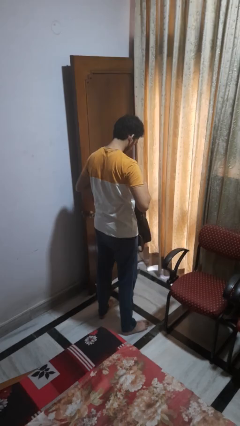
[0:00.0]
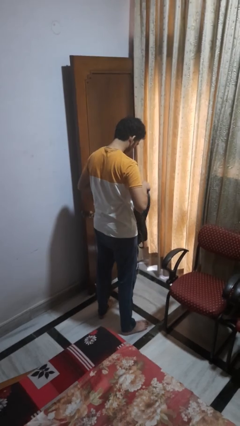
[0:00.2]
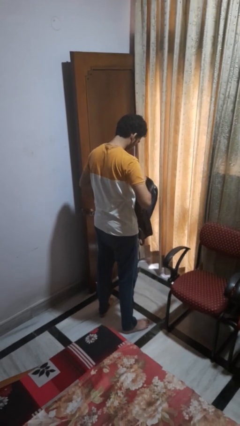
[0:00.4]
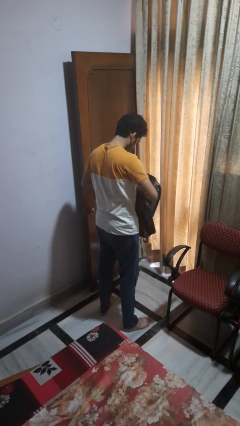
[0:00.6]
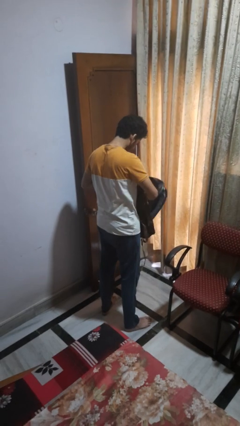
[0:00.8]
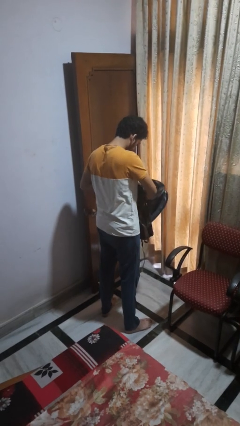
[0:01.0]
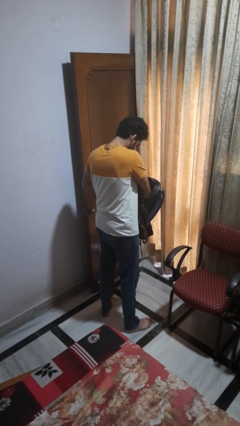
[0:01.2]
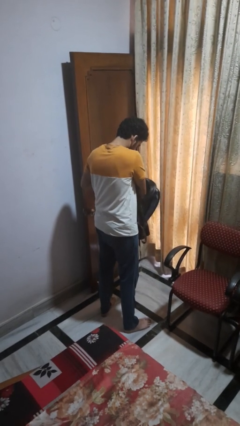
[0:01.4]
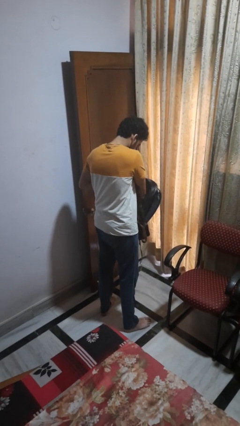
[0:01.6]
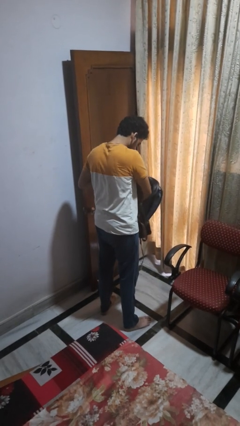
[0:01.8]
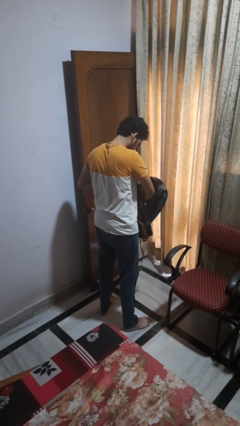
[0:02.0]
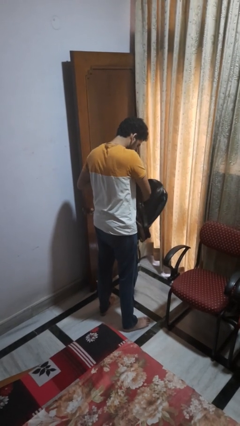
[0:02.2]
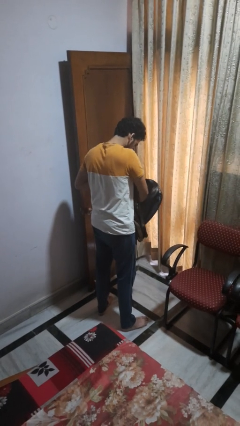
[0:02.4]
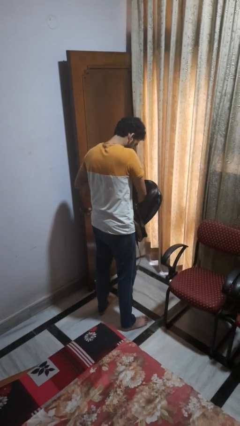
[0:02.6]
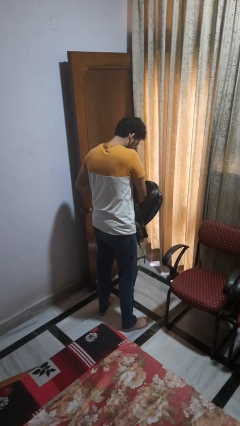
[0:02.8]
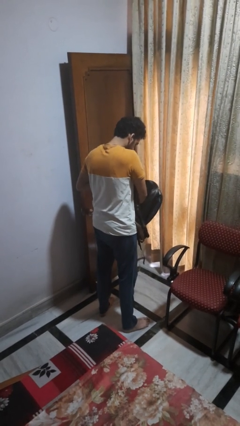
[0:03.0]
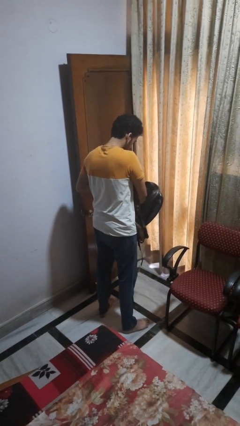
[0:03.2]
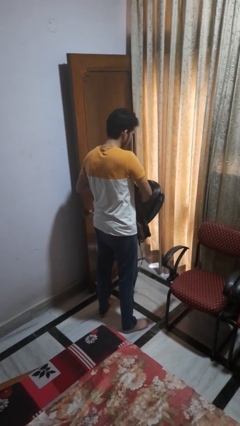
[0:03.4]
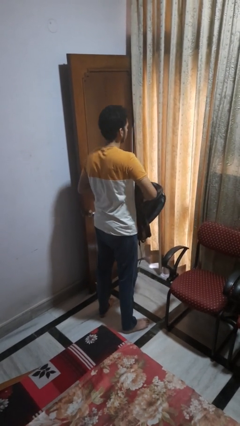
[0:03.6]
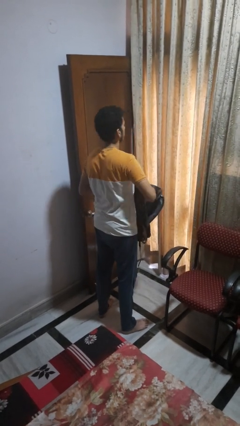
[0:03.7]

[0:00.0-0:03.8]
person searches in backpack

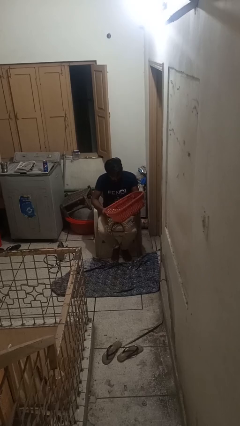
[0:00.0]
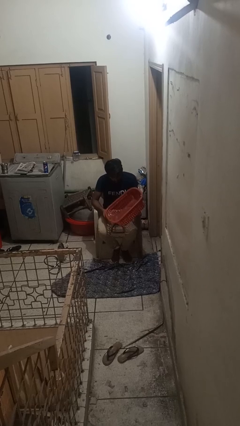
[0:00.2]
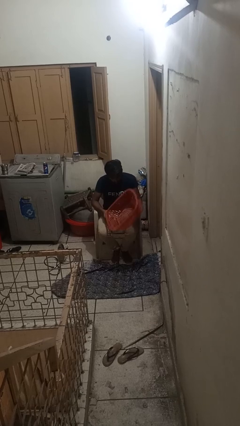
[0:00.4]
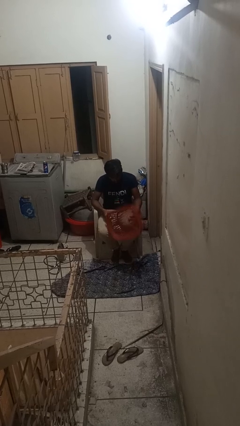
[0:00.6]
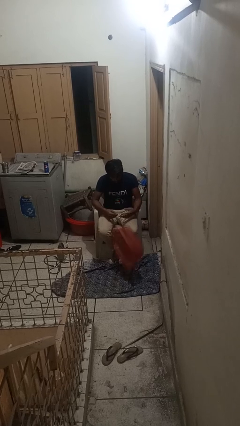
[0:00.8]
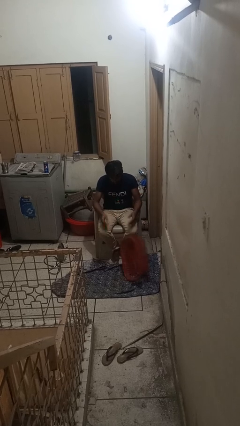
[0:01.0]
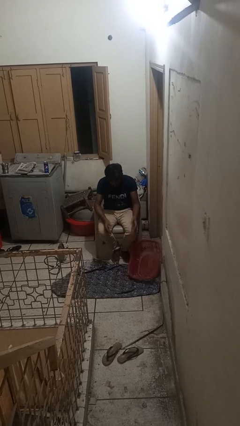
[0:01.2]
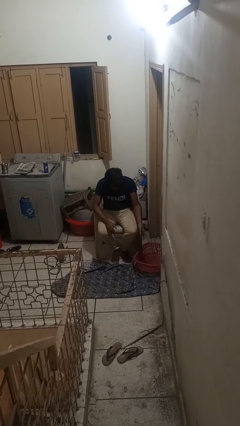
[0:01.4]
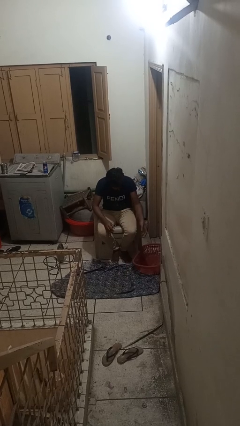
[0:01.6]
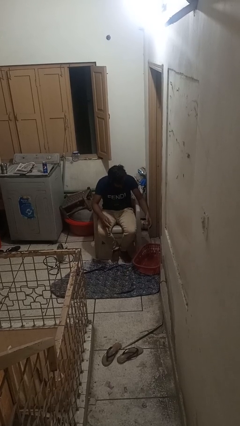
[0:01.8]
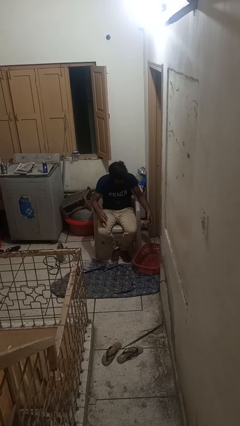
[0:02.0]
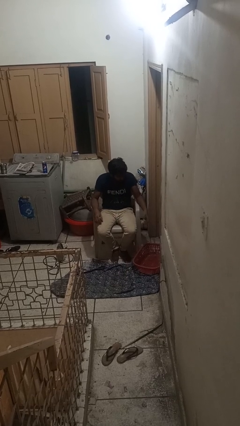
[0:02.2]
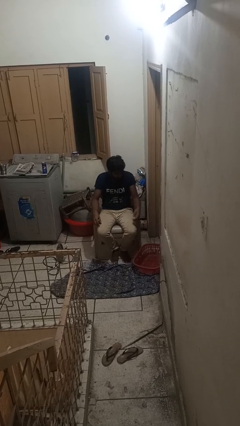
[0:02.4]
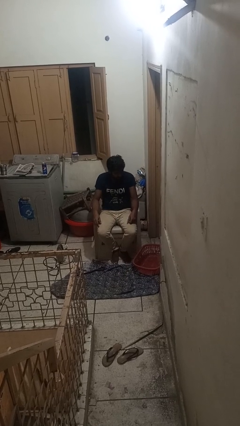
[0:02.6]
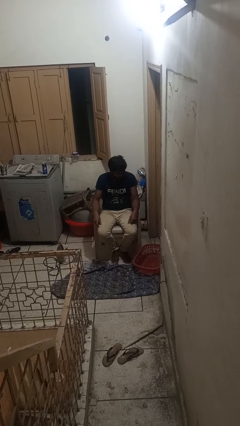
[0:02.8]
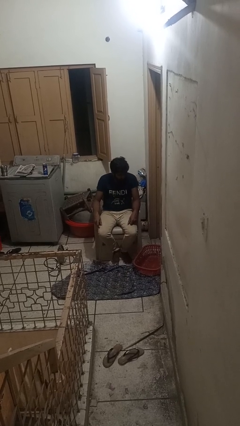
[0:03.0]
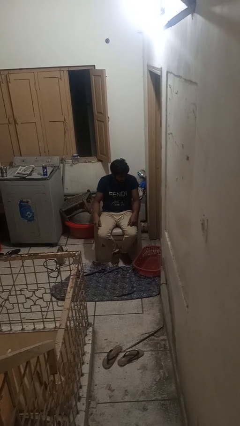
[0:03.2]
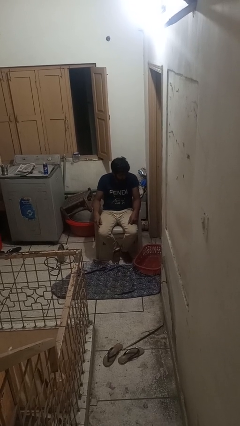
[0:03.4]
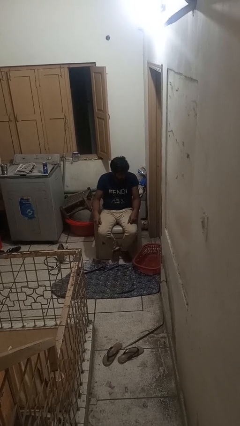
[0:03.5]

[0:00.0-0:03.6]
person drops object

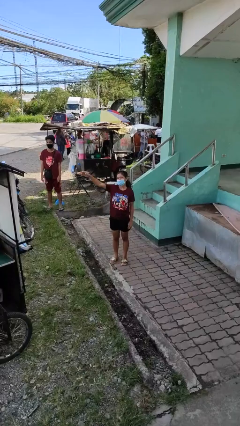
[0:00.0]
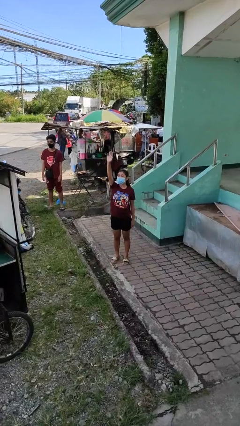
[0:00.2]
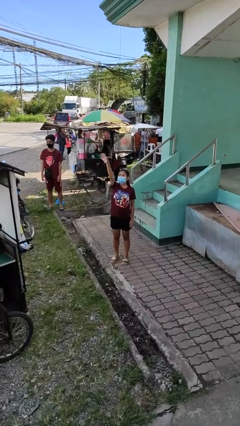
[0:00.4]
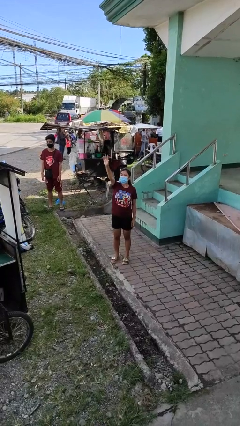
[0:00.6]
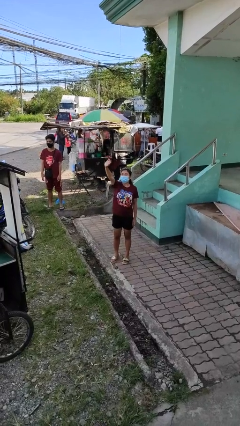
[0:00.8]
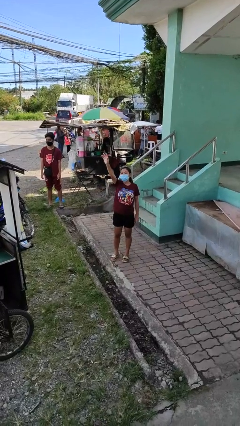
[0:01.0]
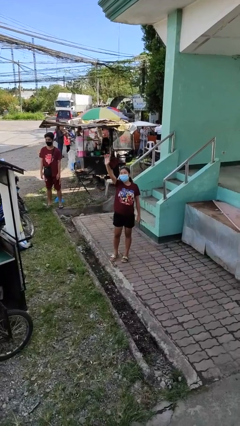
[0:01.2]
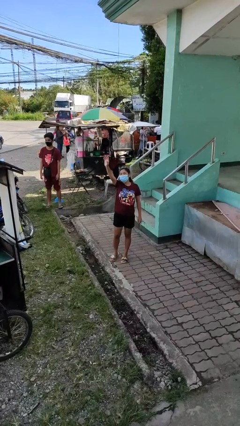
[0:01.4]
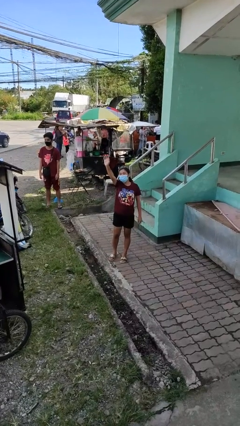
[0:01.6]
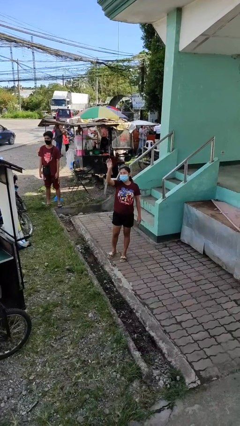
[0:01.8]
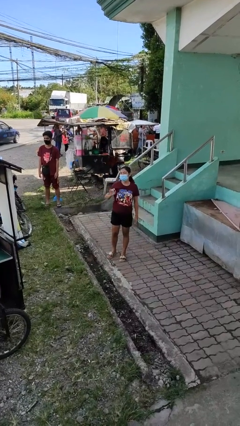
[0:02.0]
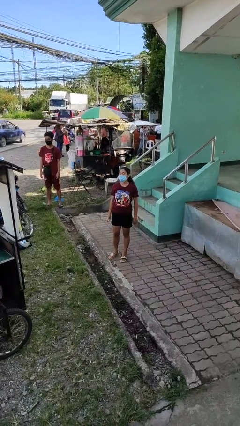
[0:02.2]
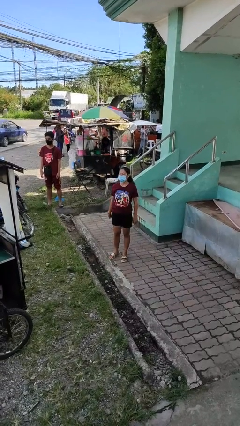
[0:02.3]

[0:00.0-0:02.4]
person waves at person

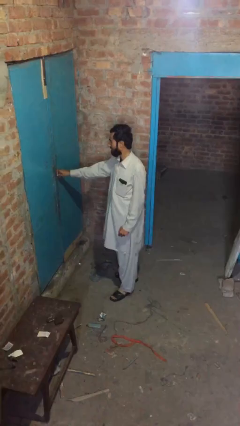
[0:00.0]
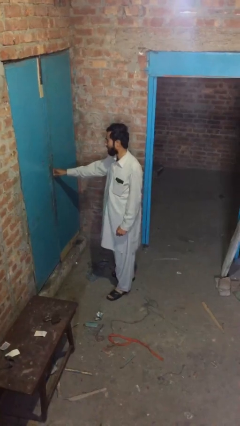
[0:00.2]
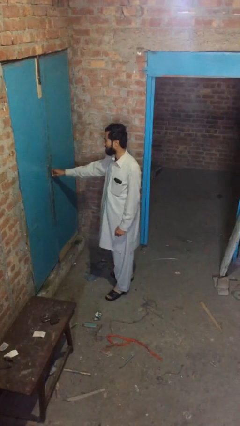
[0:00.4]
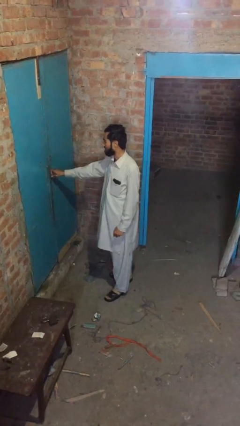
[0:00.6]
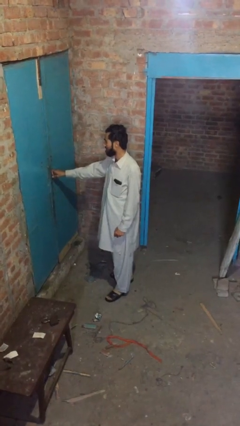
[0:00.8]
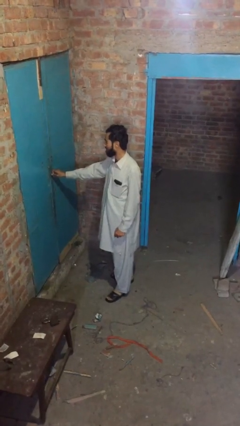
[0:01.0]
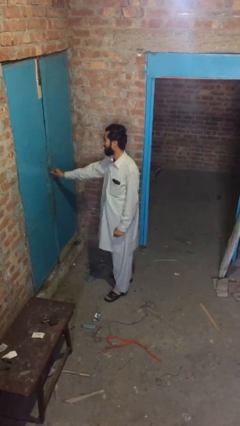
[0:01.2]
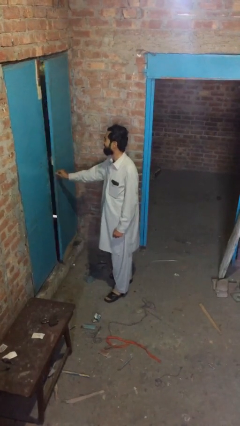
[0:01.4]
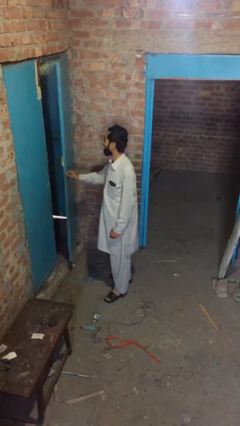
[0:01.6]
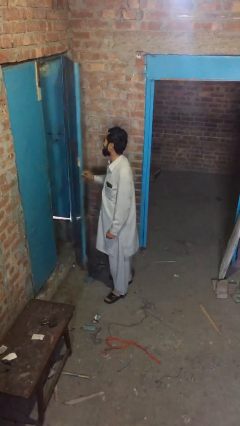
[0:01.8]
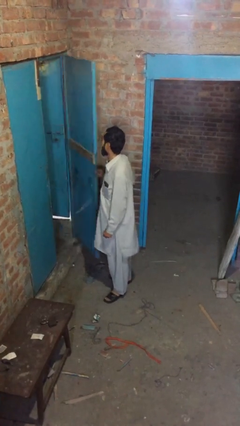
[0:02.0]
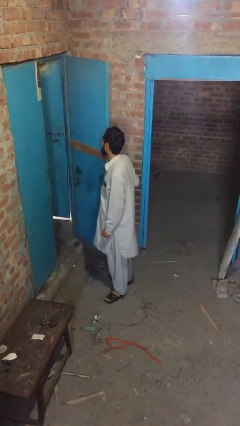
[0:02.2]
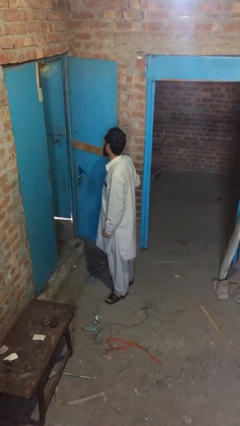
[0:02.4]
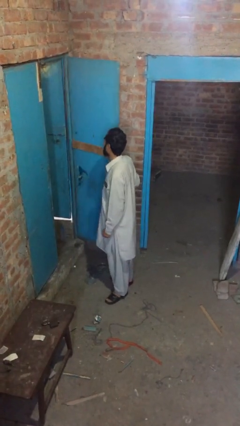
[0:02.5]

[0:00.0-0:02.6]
person opens facility door

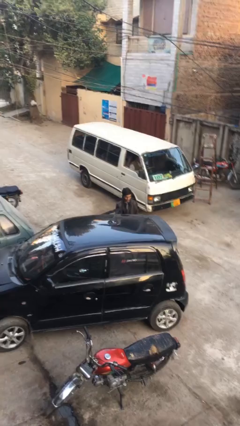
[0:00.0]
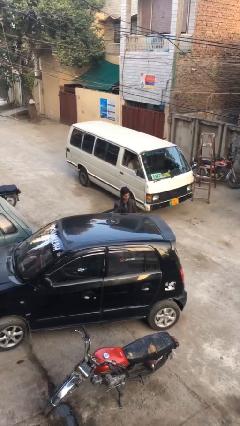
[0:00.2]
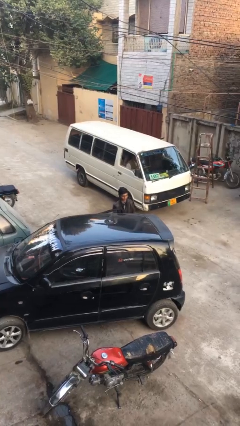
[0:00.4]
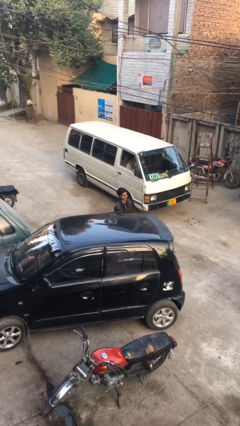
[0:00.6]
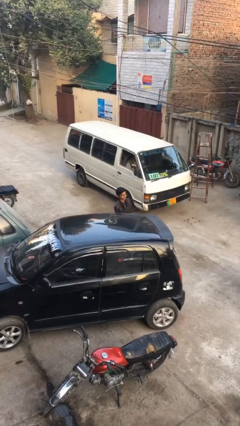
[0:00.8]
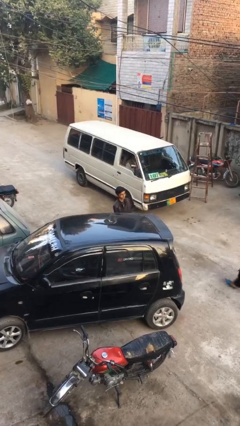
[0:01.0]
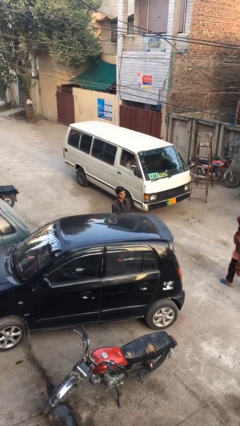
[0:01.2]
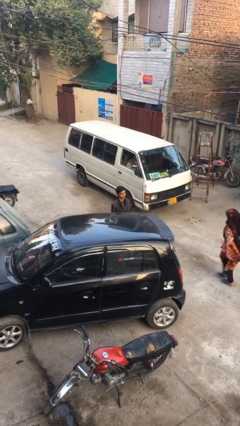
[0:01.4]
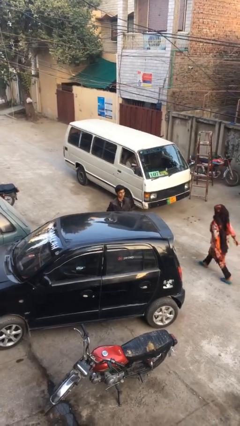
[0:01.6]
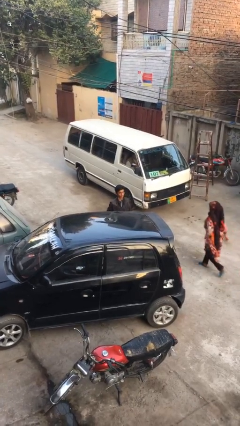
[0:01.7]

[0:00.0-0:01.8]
person closes car door

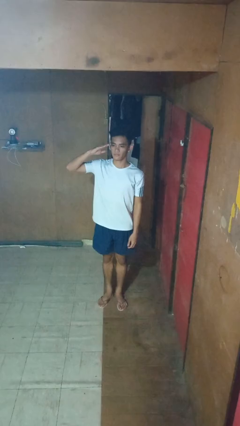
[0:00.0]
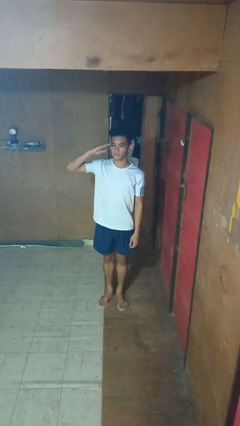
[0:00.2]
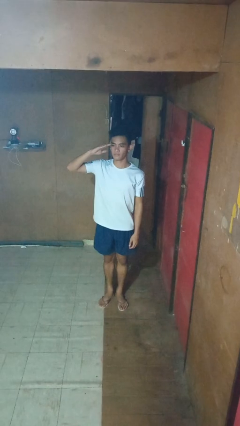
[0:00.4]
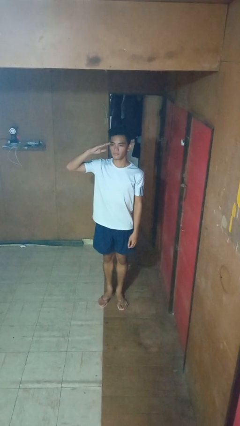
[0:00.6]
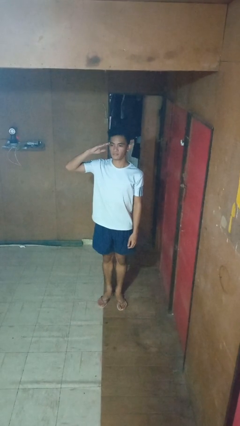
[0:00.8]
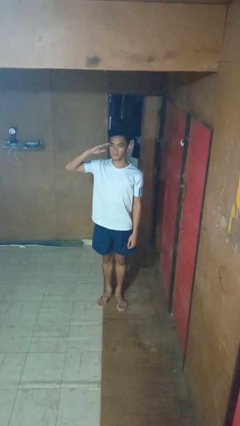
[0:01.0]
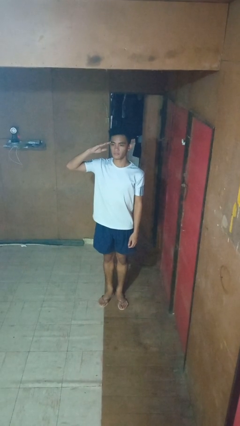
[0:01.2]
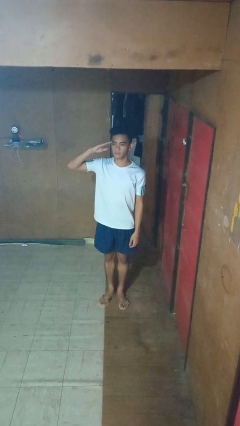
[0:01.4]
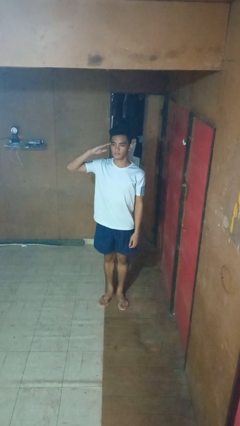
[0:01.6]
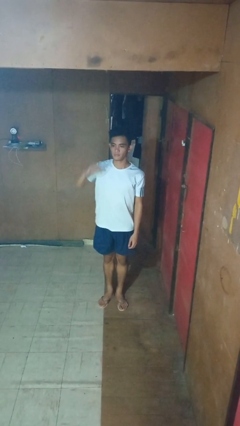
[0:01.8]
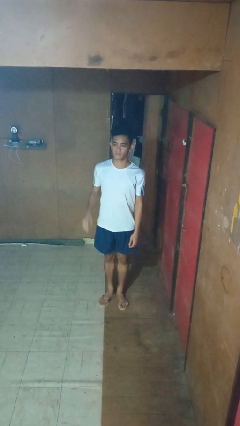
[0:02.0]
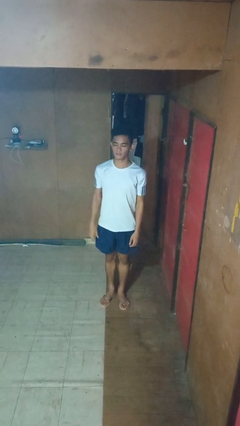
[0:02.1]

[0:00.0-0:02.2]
person salutes

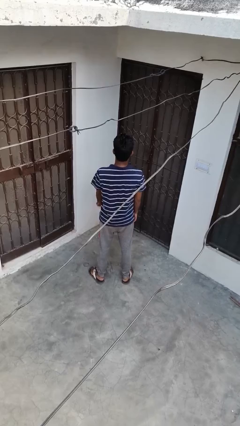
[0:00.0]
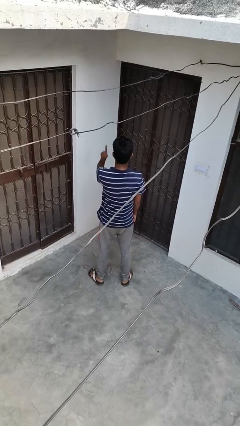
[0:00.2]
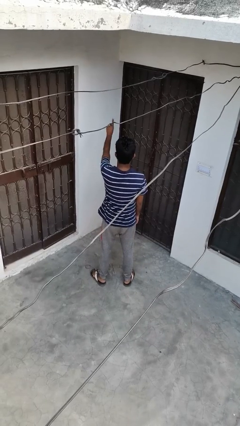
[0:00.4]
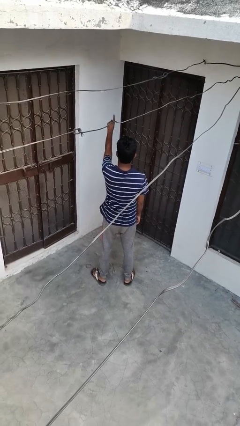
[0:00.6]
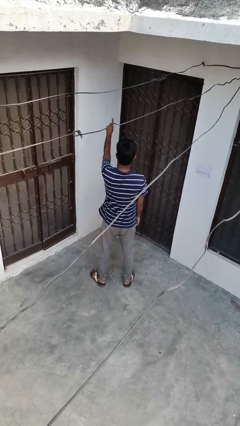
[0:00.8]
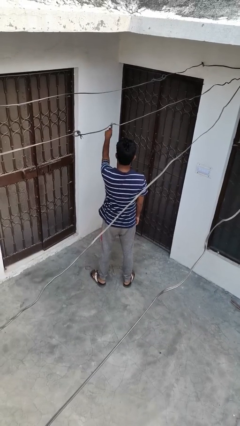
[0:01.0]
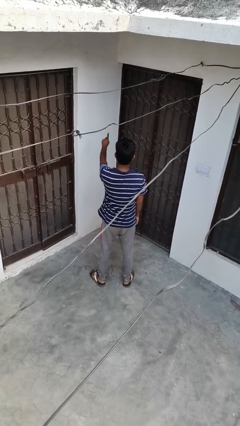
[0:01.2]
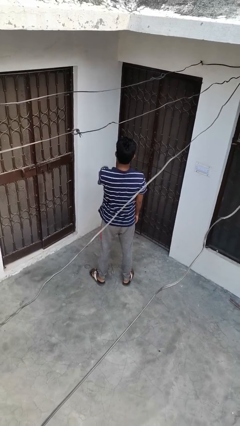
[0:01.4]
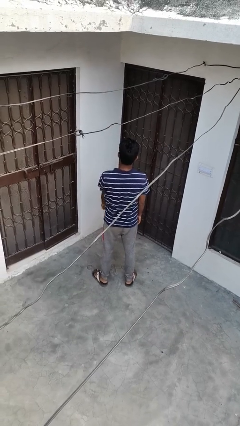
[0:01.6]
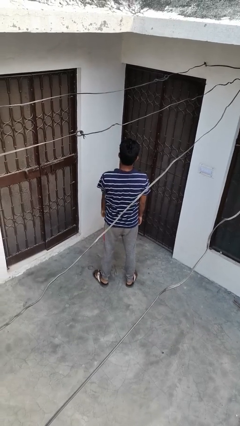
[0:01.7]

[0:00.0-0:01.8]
person gestures number one
